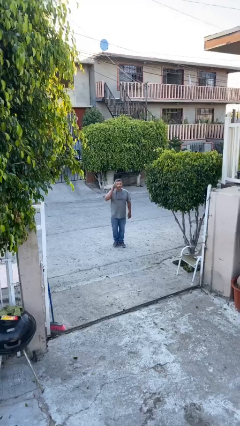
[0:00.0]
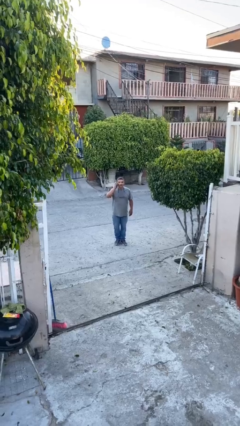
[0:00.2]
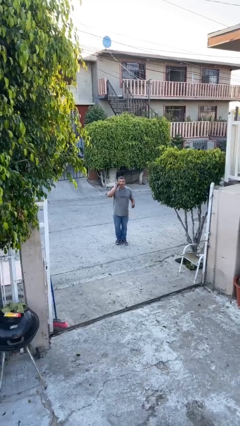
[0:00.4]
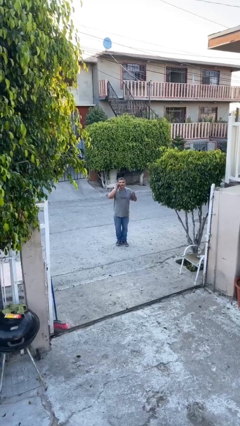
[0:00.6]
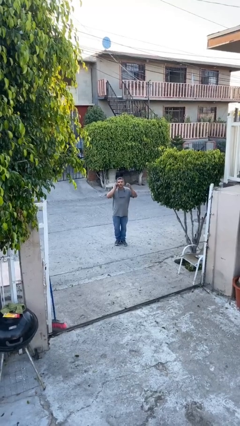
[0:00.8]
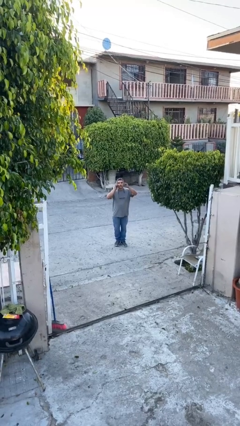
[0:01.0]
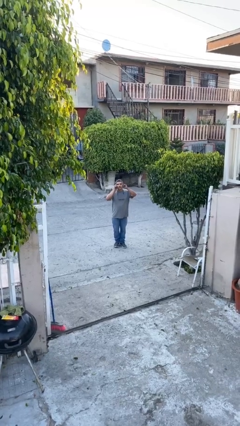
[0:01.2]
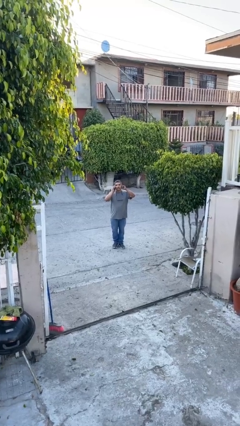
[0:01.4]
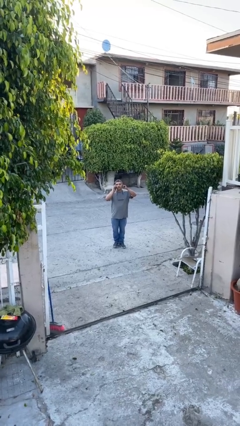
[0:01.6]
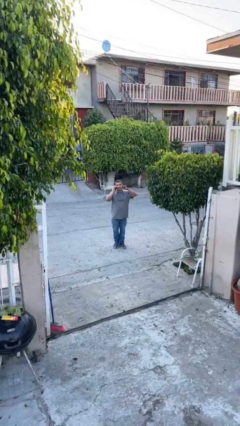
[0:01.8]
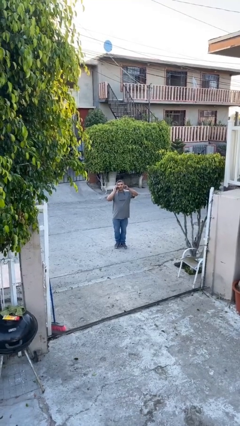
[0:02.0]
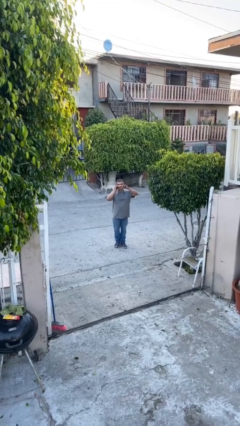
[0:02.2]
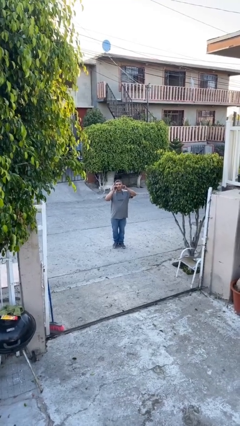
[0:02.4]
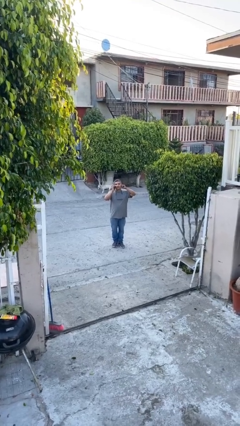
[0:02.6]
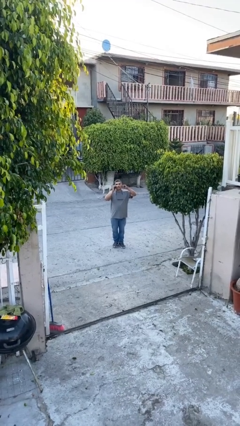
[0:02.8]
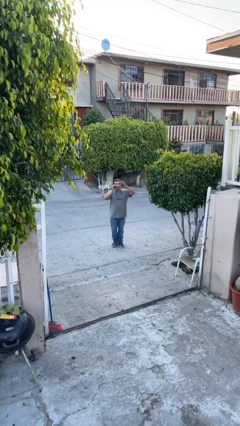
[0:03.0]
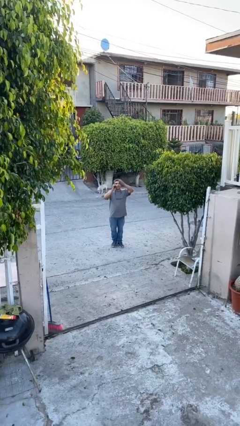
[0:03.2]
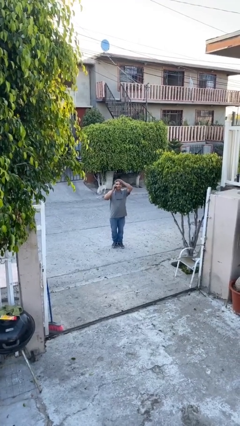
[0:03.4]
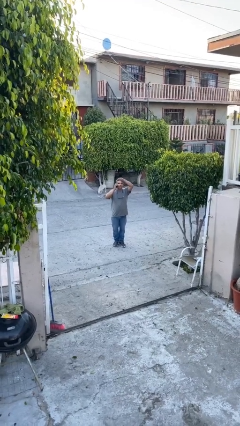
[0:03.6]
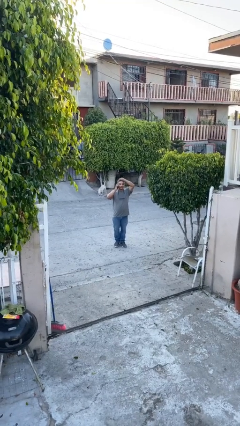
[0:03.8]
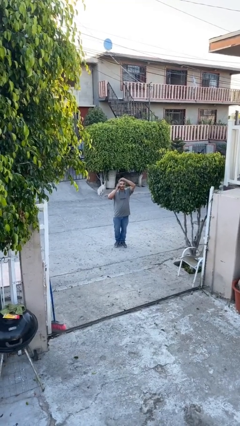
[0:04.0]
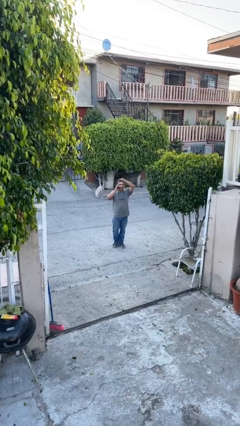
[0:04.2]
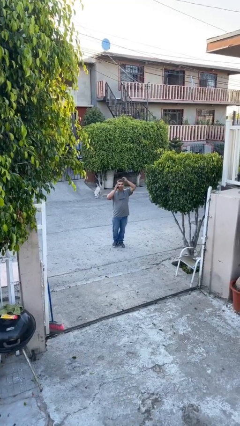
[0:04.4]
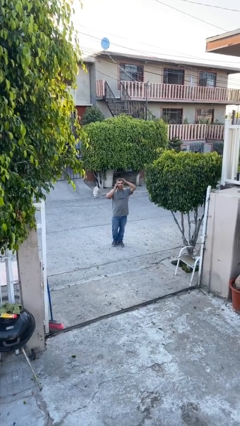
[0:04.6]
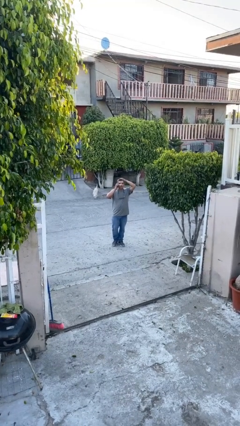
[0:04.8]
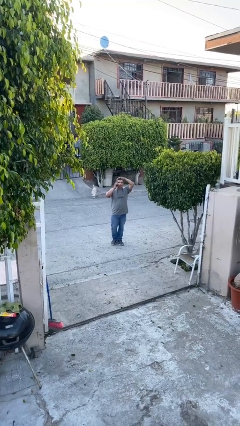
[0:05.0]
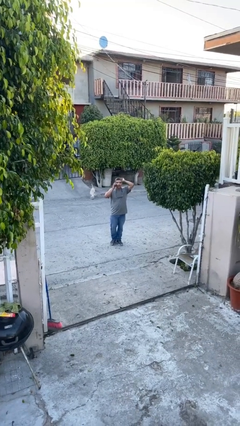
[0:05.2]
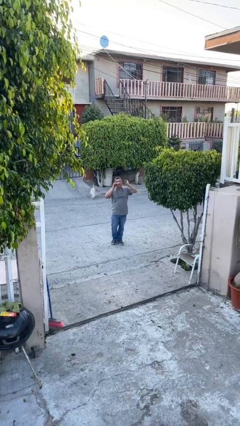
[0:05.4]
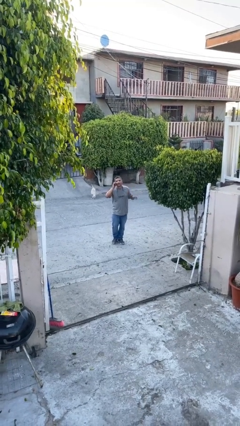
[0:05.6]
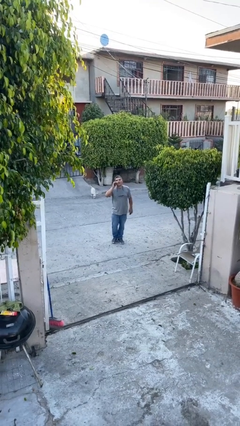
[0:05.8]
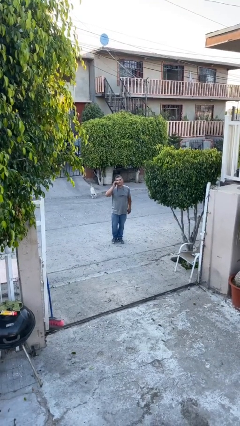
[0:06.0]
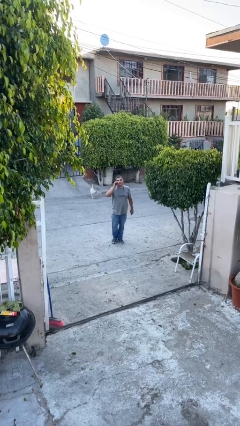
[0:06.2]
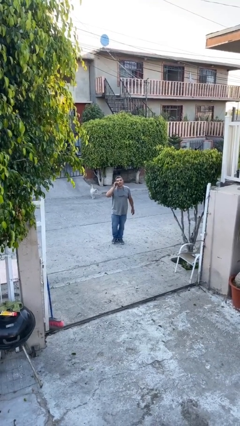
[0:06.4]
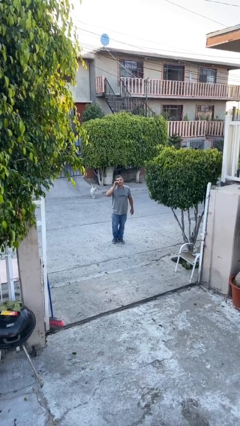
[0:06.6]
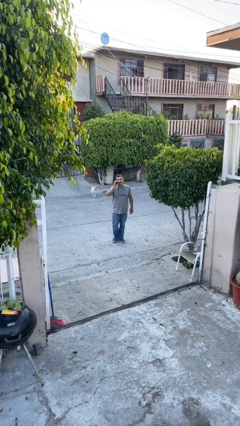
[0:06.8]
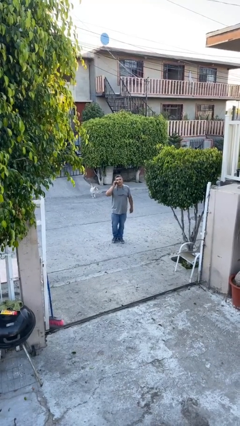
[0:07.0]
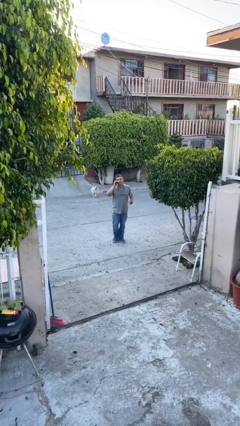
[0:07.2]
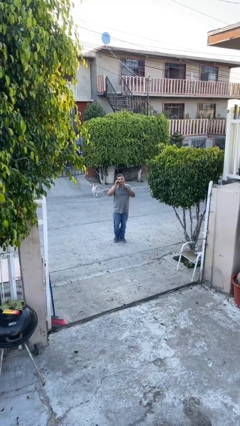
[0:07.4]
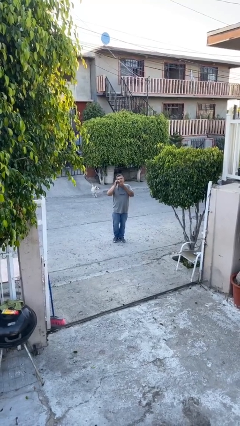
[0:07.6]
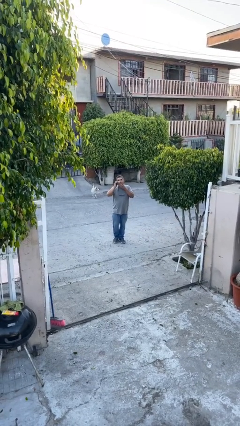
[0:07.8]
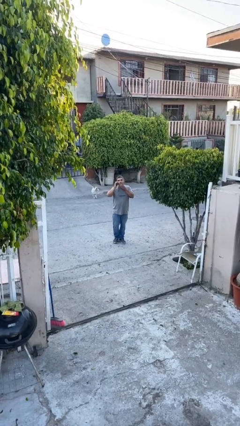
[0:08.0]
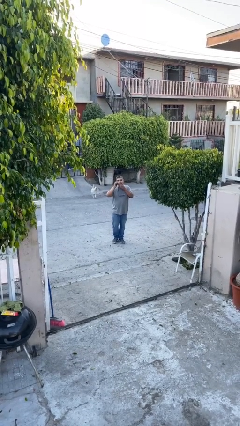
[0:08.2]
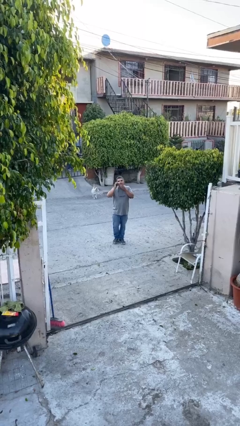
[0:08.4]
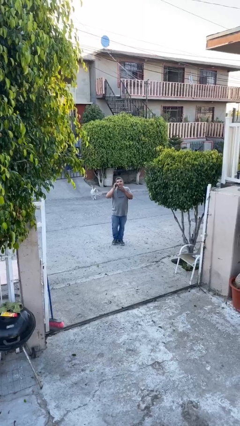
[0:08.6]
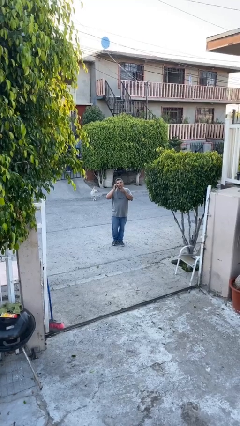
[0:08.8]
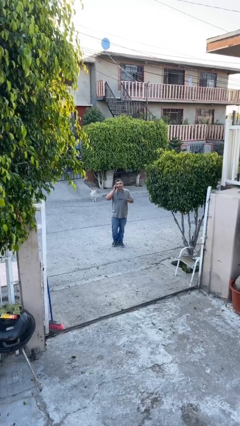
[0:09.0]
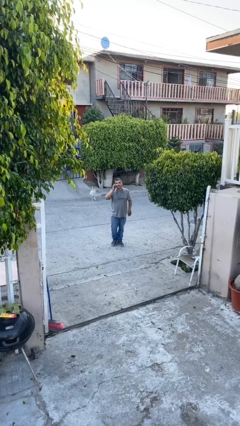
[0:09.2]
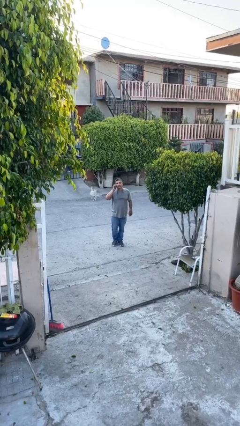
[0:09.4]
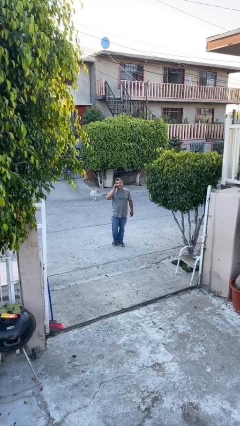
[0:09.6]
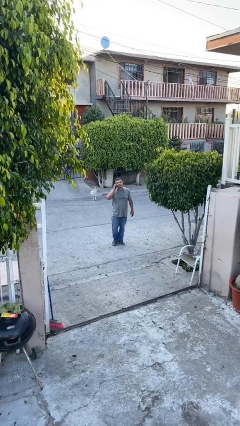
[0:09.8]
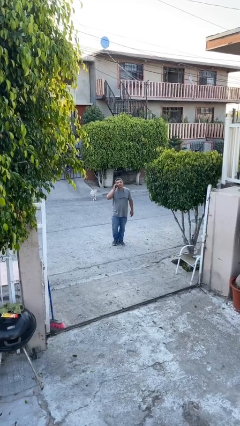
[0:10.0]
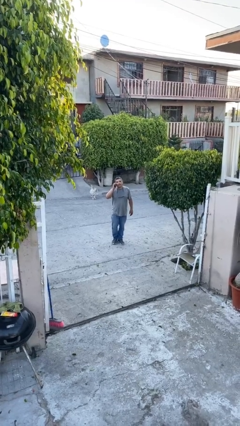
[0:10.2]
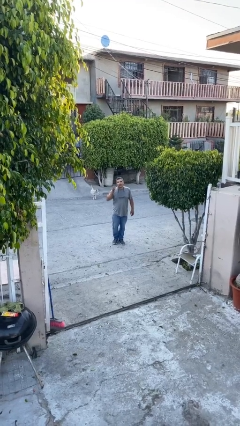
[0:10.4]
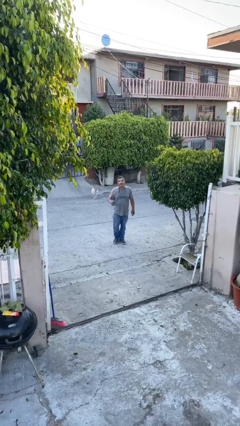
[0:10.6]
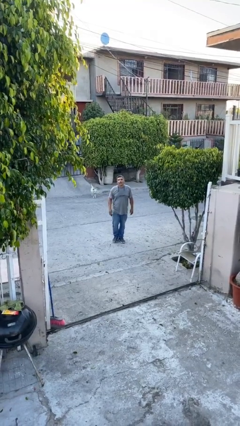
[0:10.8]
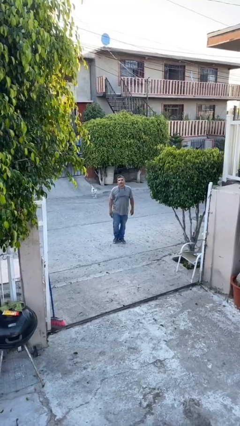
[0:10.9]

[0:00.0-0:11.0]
person talks on phone

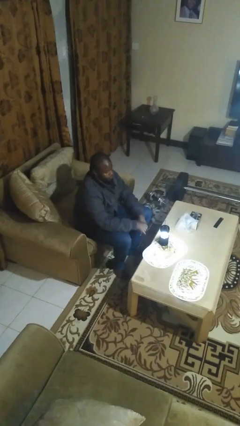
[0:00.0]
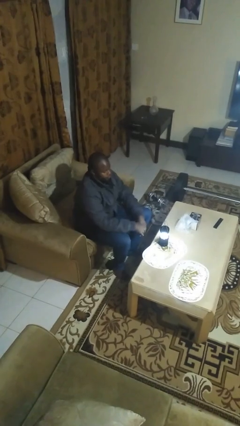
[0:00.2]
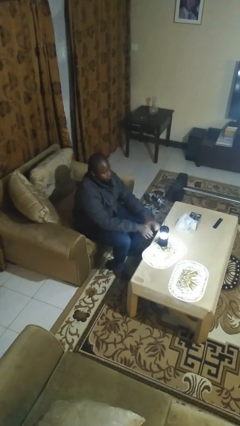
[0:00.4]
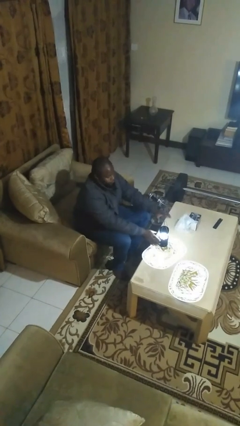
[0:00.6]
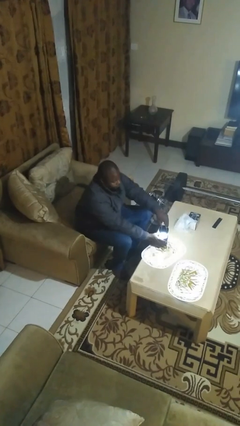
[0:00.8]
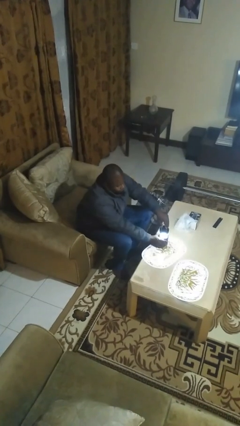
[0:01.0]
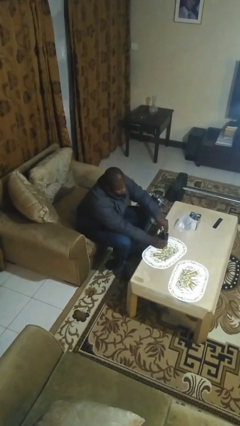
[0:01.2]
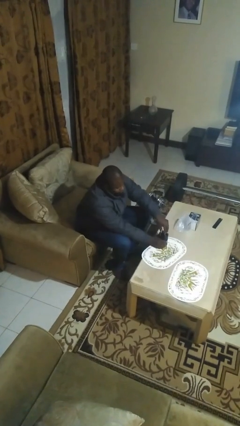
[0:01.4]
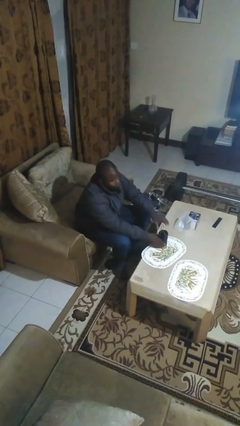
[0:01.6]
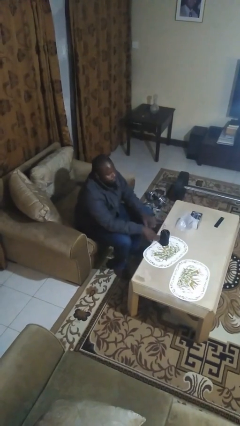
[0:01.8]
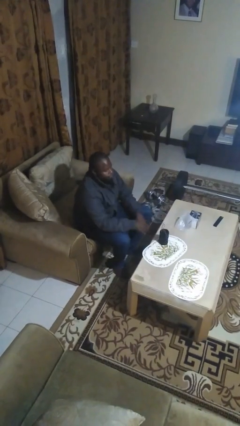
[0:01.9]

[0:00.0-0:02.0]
person turns off lamp

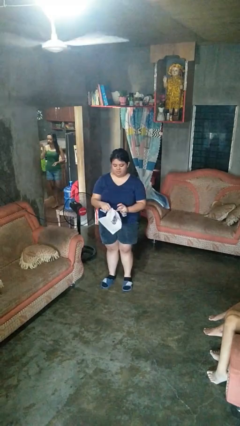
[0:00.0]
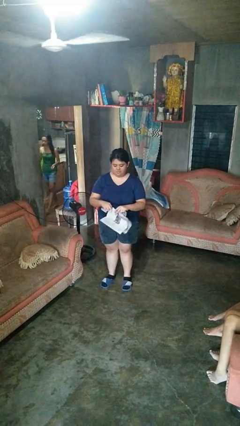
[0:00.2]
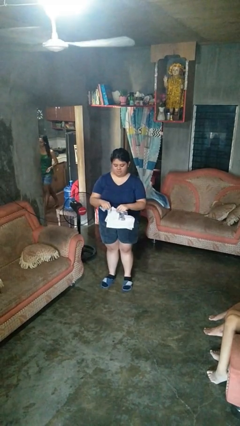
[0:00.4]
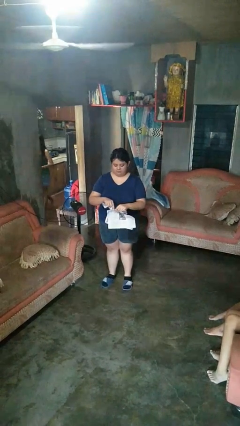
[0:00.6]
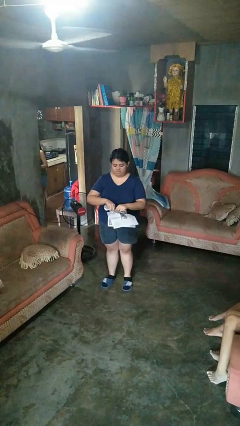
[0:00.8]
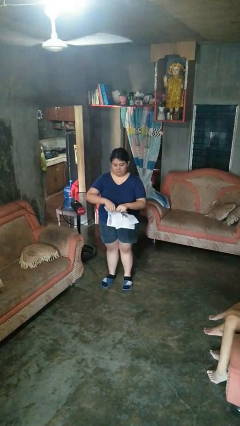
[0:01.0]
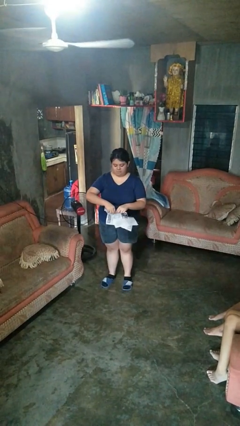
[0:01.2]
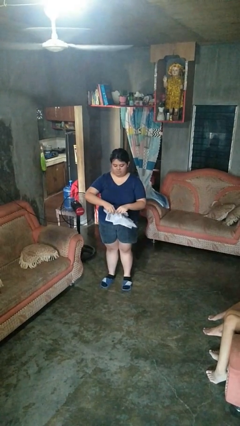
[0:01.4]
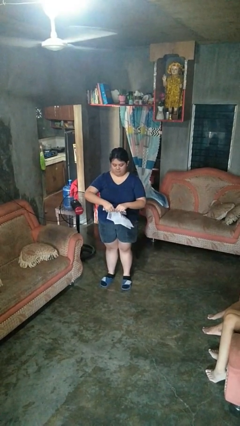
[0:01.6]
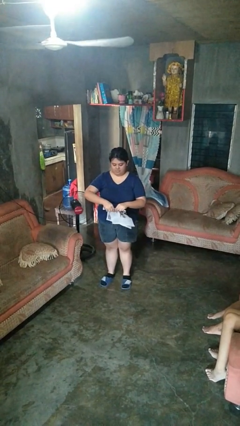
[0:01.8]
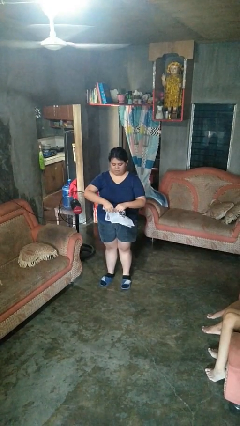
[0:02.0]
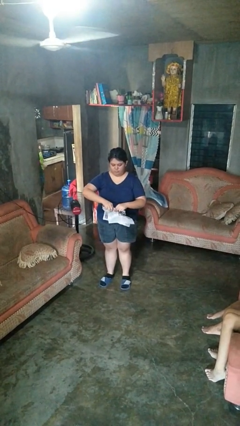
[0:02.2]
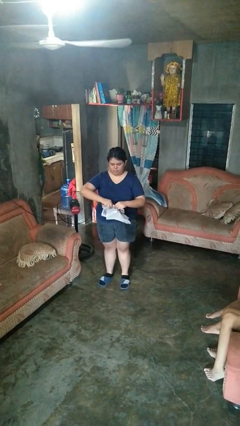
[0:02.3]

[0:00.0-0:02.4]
person tears paper

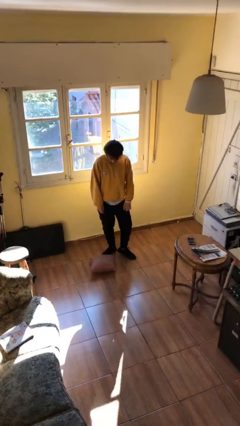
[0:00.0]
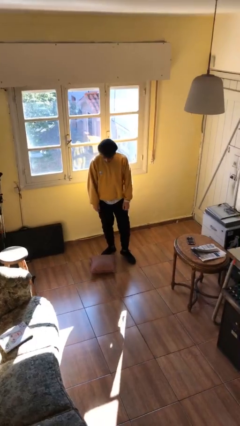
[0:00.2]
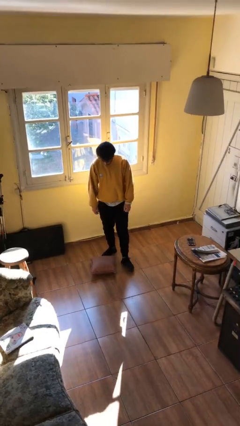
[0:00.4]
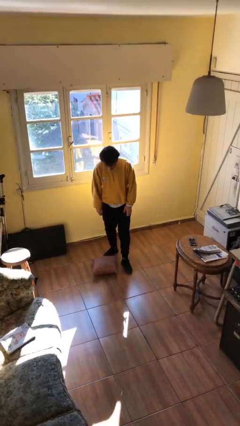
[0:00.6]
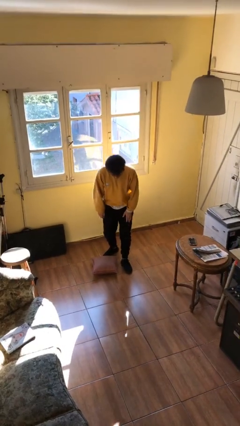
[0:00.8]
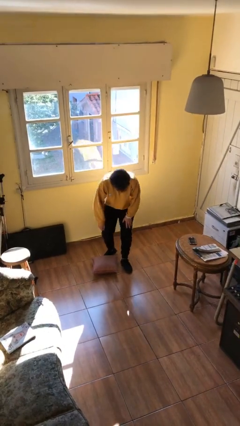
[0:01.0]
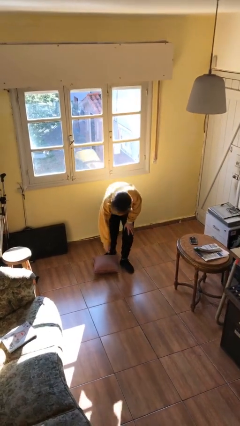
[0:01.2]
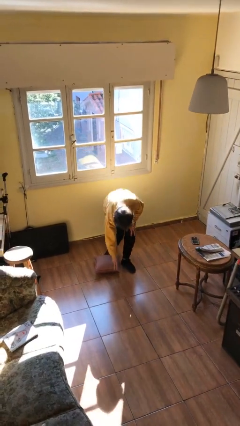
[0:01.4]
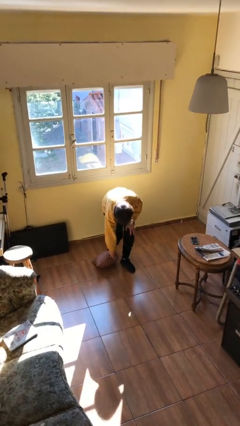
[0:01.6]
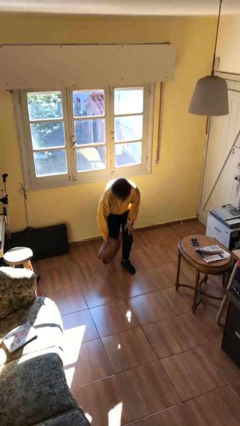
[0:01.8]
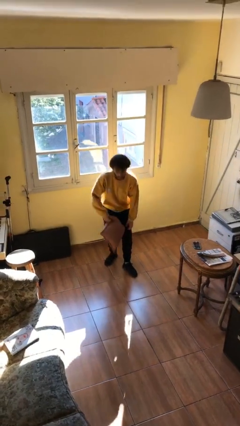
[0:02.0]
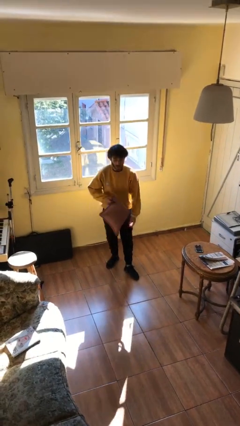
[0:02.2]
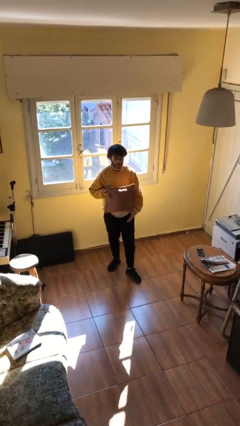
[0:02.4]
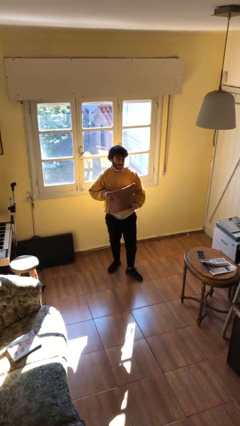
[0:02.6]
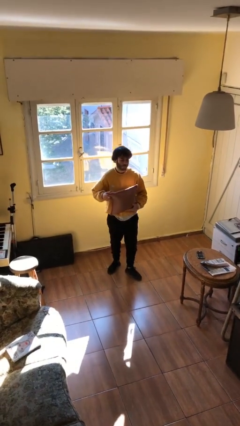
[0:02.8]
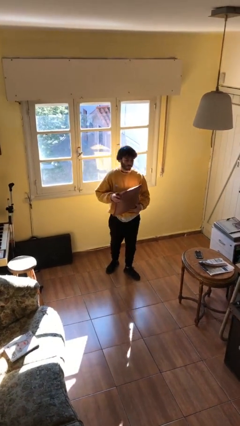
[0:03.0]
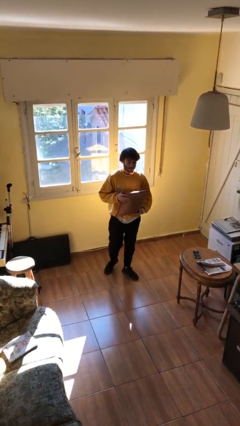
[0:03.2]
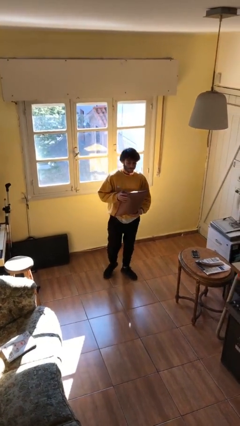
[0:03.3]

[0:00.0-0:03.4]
person picks up object from floor
